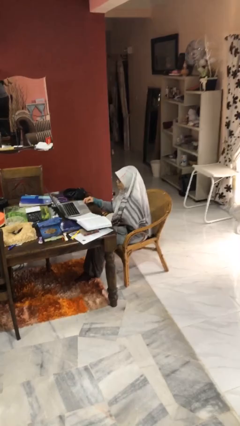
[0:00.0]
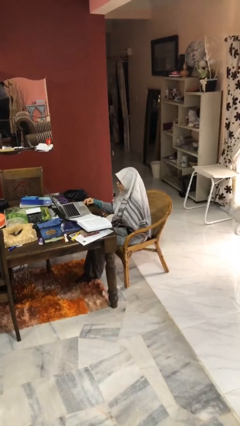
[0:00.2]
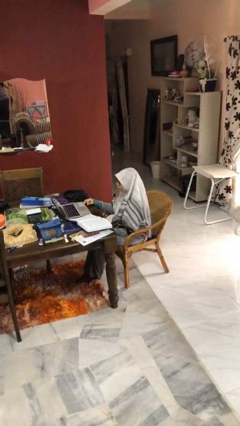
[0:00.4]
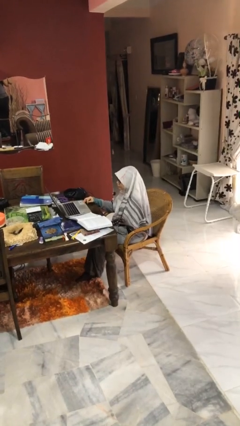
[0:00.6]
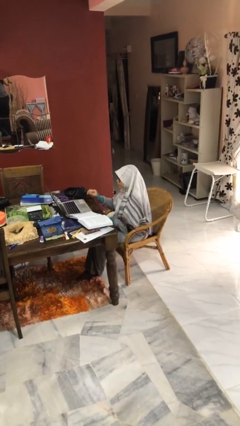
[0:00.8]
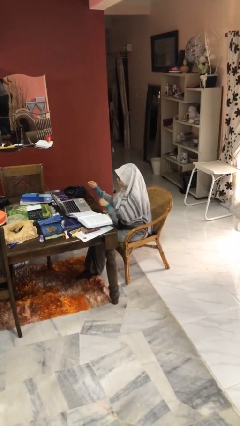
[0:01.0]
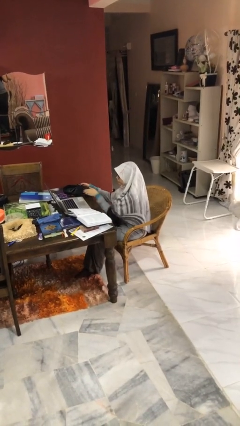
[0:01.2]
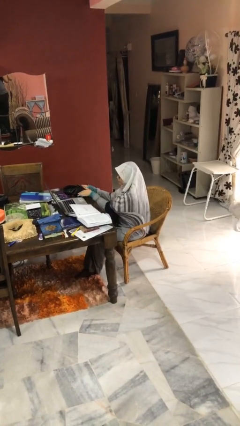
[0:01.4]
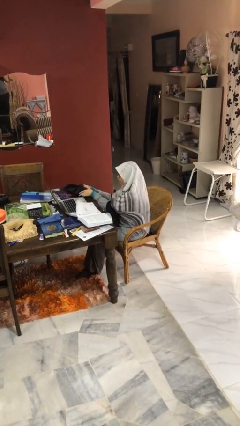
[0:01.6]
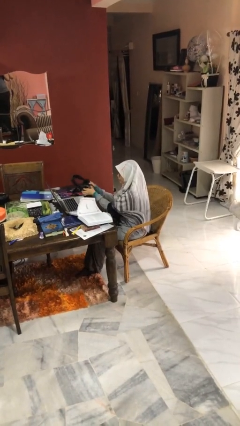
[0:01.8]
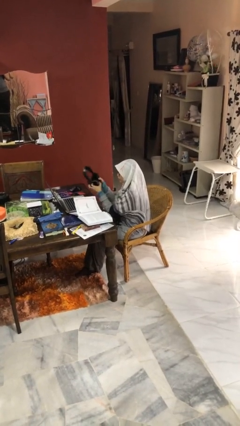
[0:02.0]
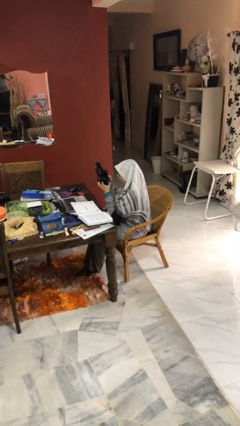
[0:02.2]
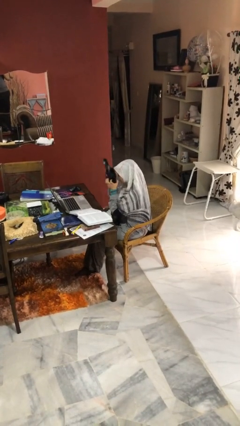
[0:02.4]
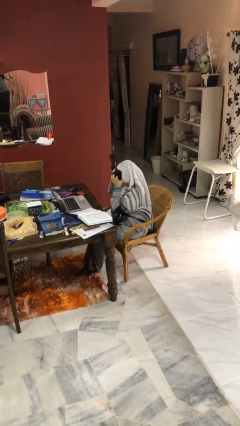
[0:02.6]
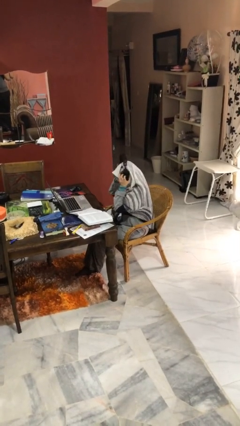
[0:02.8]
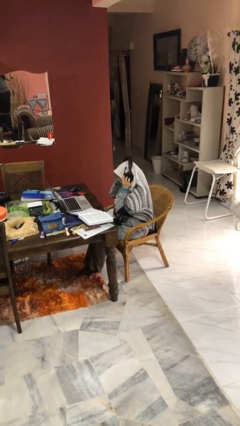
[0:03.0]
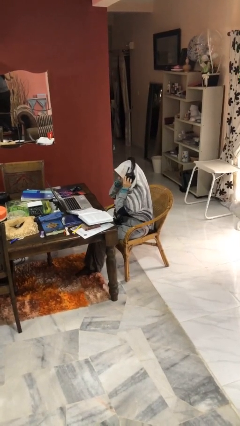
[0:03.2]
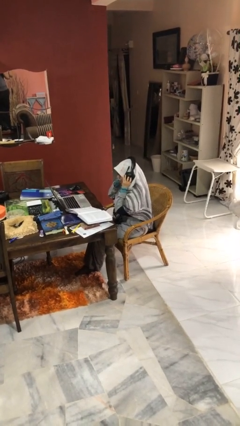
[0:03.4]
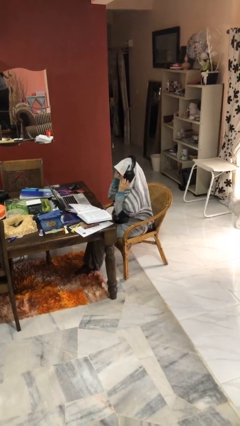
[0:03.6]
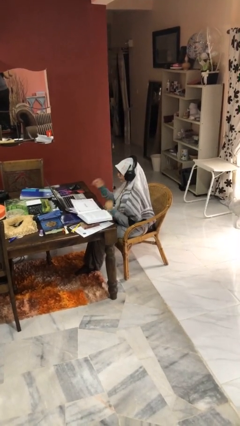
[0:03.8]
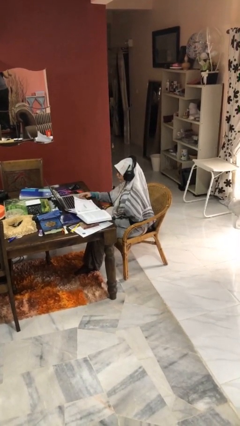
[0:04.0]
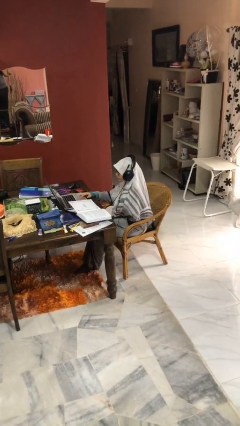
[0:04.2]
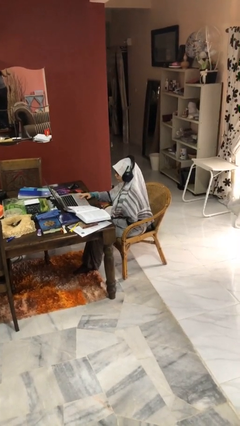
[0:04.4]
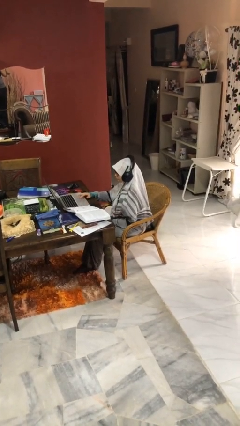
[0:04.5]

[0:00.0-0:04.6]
person puts on headphones

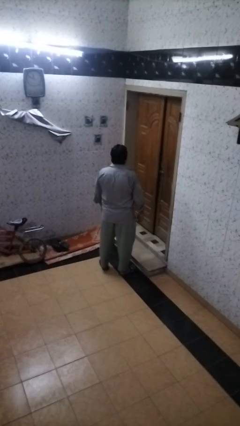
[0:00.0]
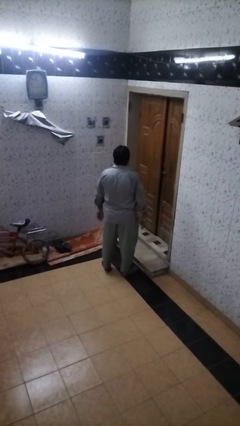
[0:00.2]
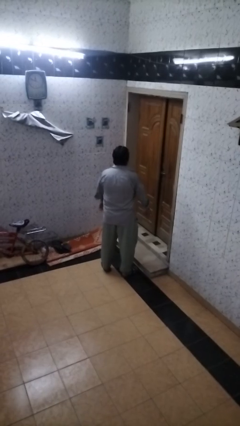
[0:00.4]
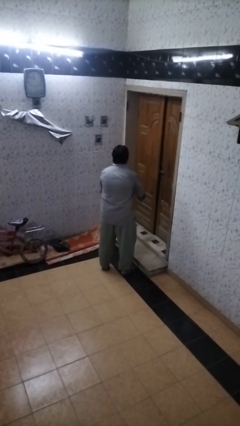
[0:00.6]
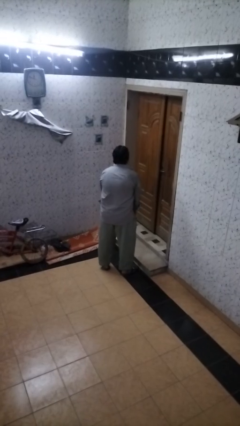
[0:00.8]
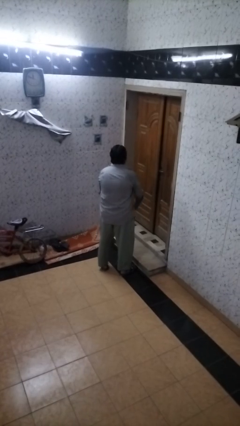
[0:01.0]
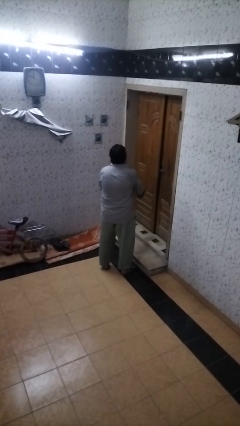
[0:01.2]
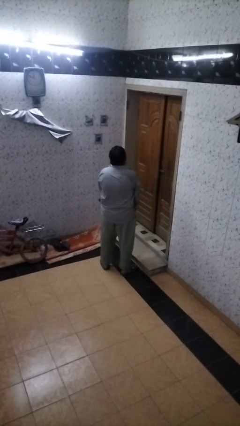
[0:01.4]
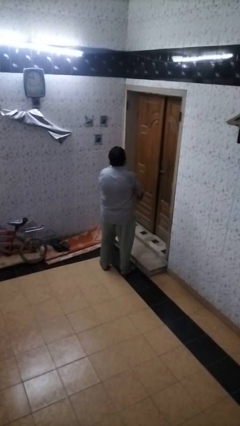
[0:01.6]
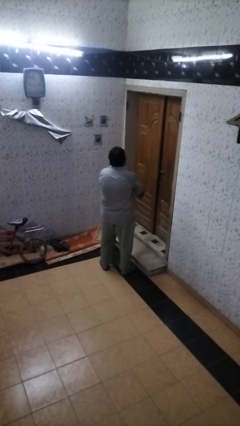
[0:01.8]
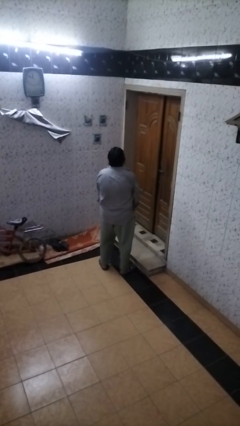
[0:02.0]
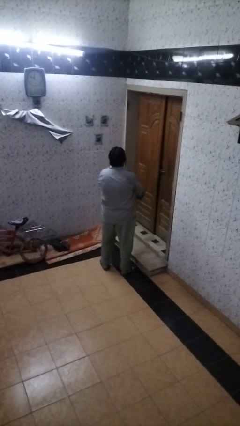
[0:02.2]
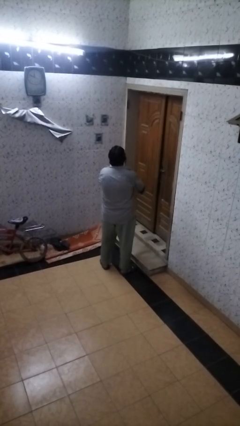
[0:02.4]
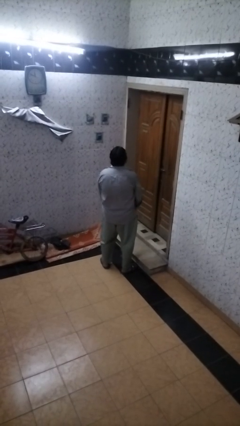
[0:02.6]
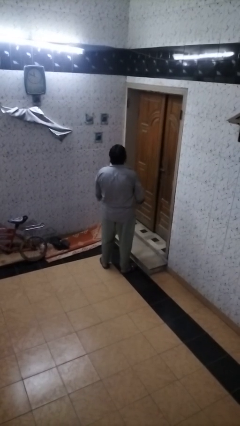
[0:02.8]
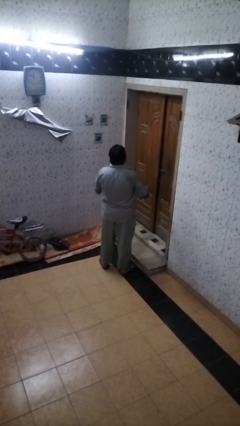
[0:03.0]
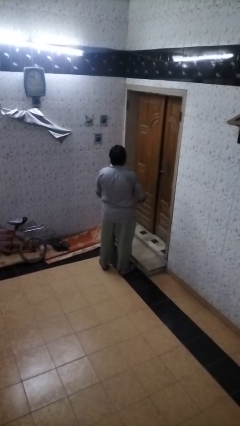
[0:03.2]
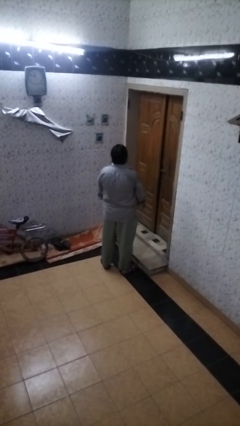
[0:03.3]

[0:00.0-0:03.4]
person slaps hands on thighs

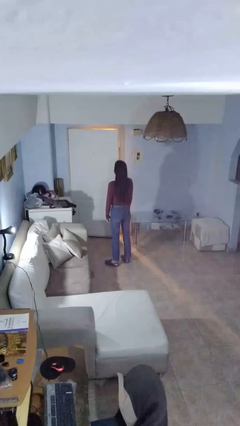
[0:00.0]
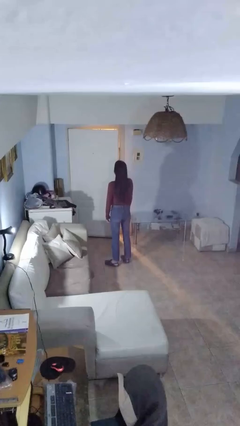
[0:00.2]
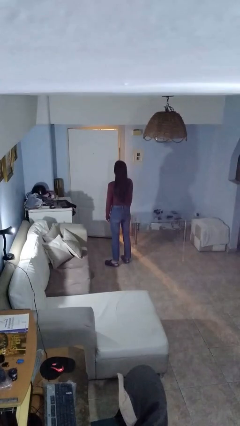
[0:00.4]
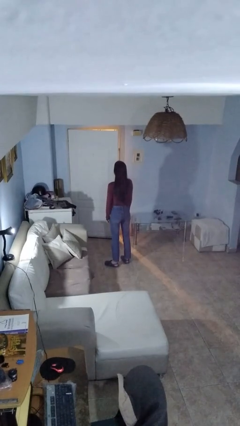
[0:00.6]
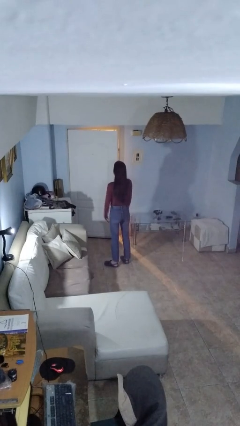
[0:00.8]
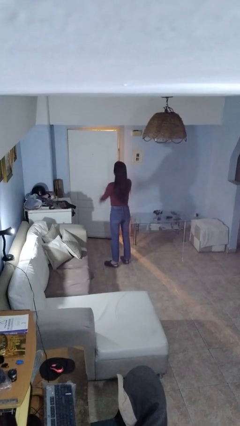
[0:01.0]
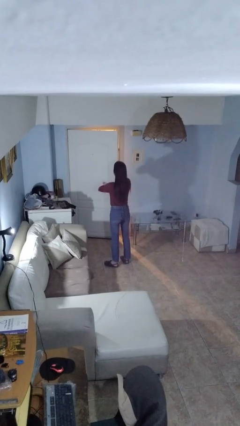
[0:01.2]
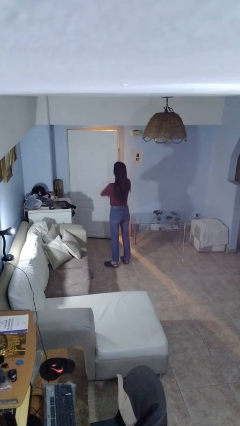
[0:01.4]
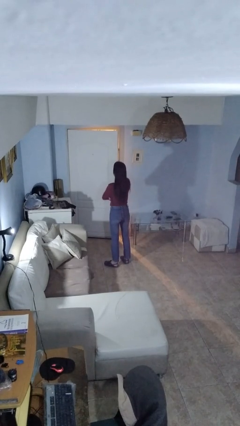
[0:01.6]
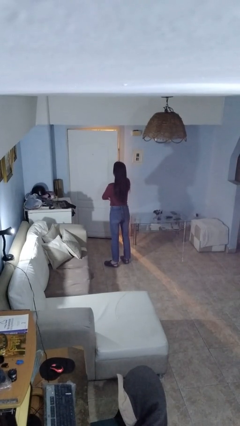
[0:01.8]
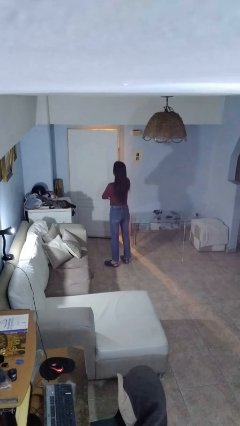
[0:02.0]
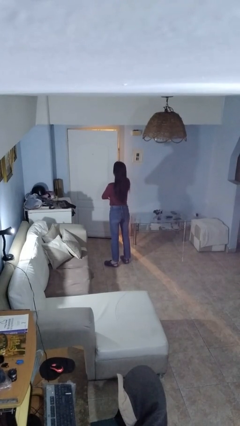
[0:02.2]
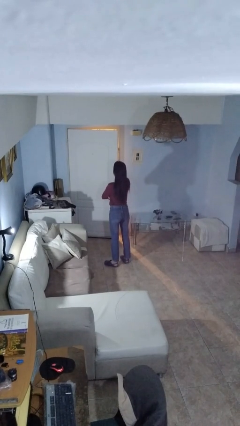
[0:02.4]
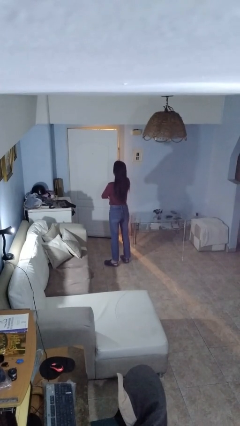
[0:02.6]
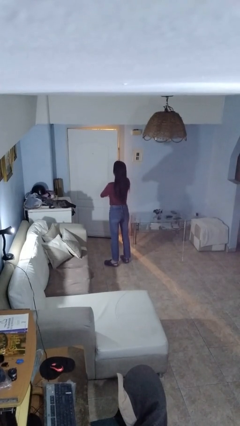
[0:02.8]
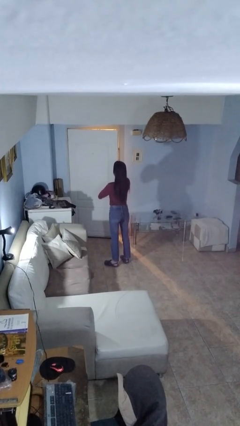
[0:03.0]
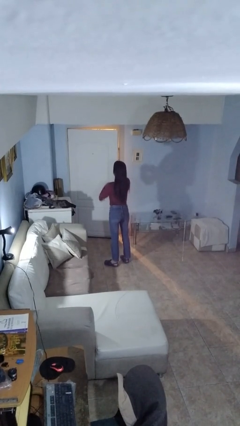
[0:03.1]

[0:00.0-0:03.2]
person crosses arms

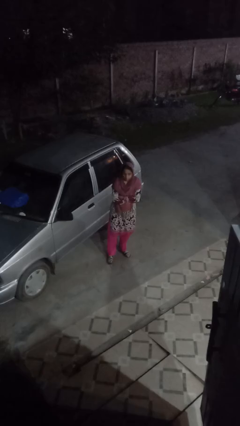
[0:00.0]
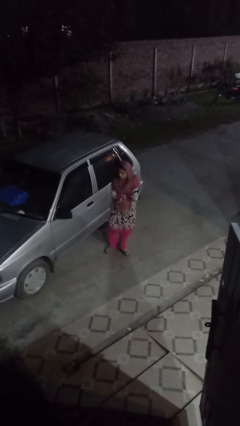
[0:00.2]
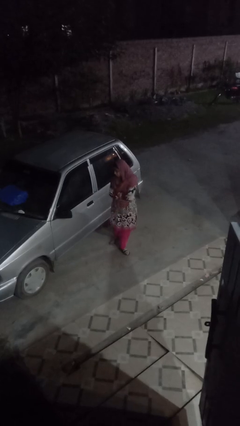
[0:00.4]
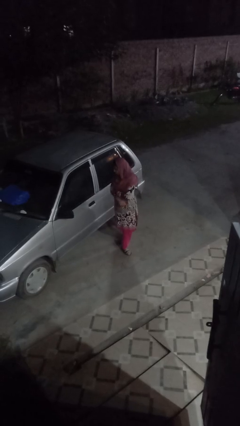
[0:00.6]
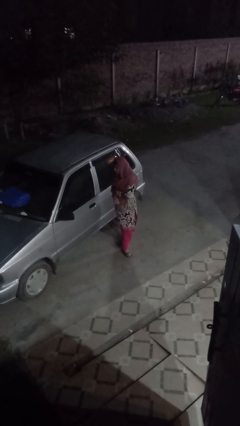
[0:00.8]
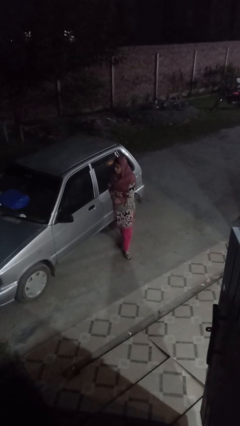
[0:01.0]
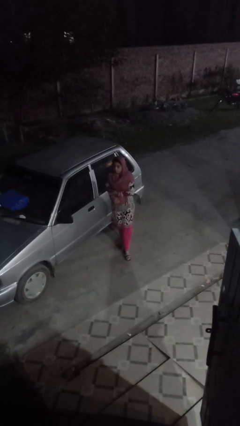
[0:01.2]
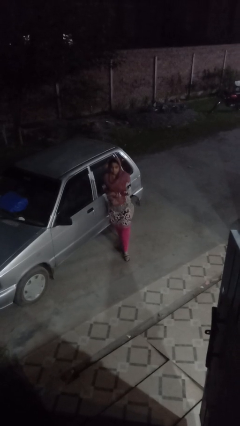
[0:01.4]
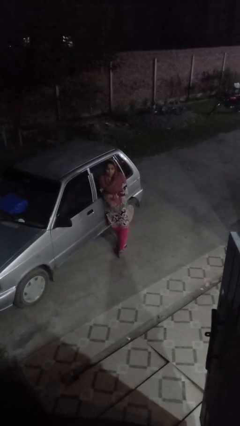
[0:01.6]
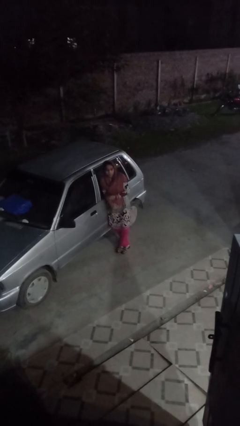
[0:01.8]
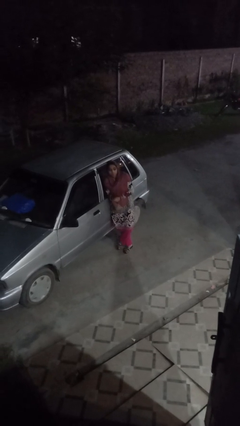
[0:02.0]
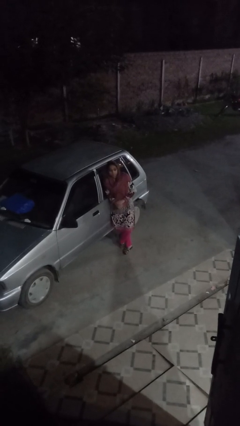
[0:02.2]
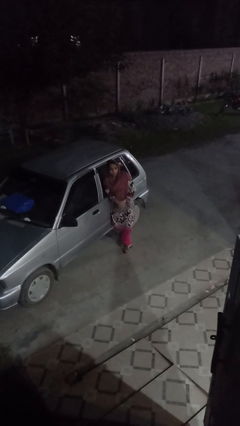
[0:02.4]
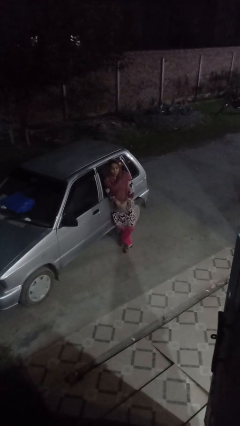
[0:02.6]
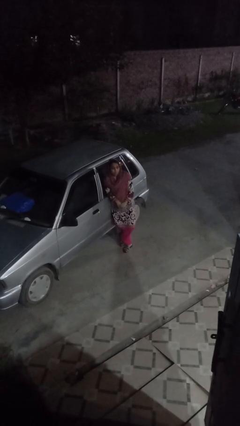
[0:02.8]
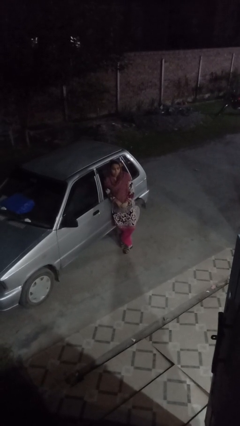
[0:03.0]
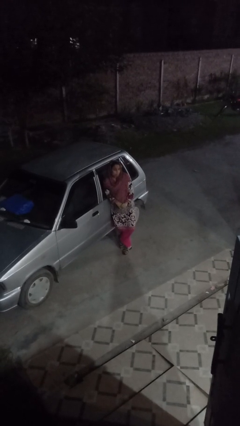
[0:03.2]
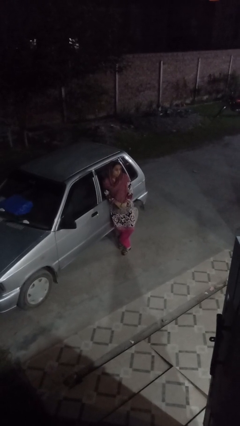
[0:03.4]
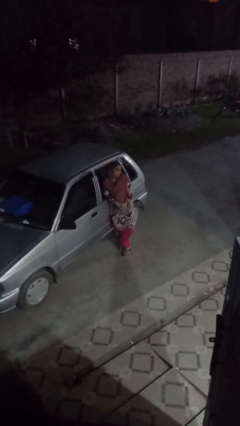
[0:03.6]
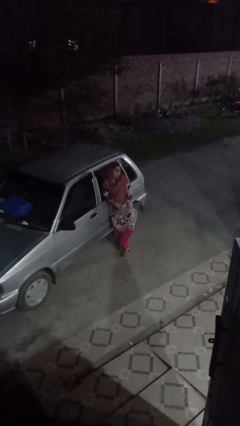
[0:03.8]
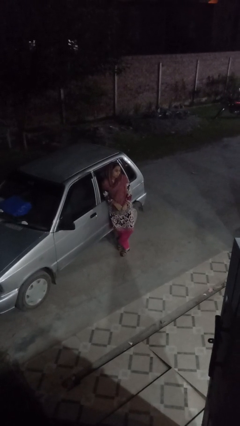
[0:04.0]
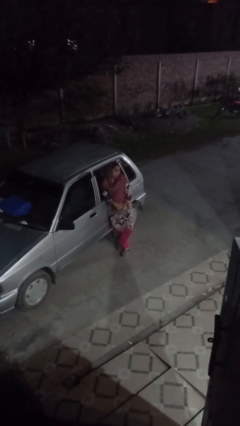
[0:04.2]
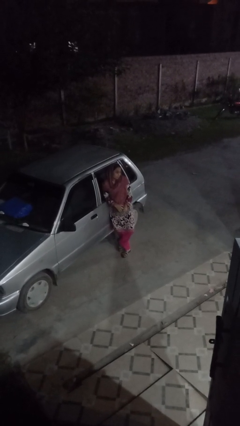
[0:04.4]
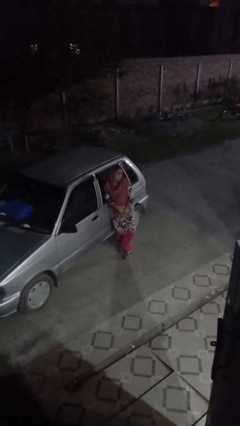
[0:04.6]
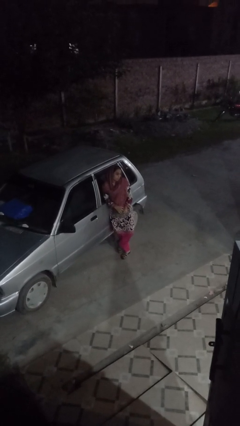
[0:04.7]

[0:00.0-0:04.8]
person leans against car

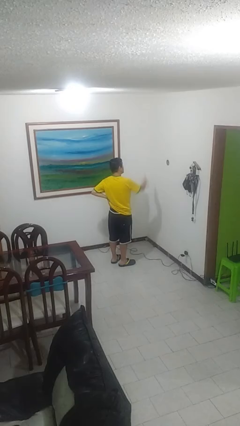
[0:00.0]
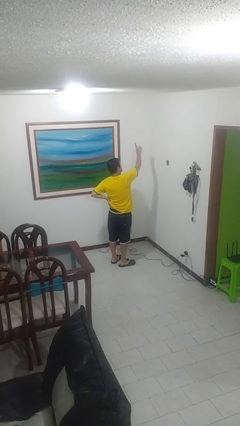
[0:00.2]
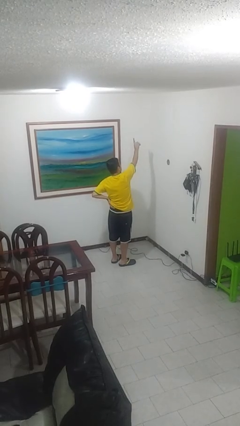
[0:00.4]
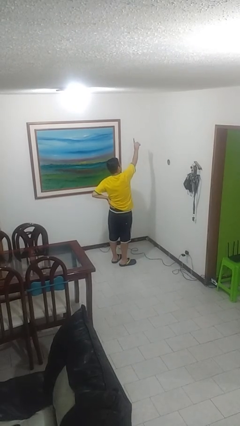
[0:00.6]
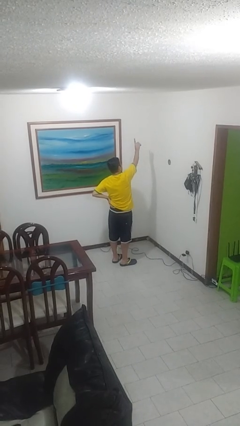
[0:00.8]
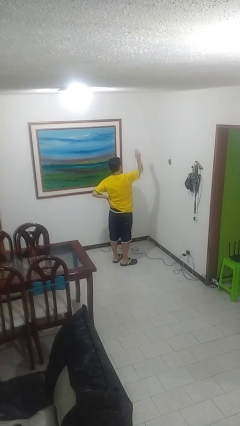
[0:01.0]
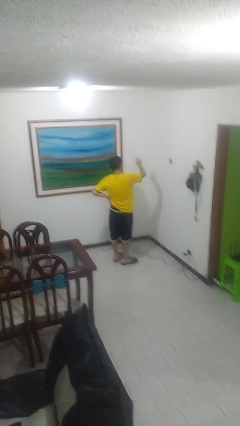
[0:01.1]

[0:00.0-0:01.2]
person gestures number one
